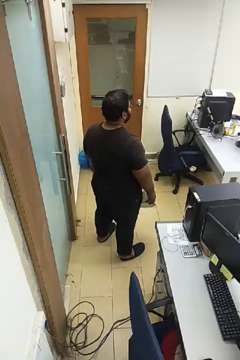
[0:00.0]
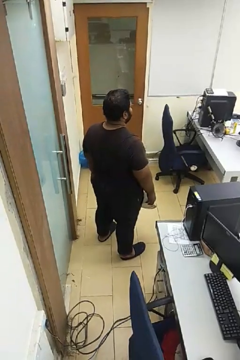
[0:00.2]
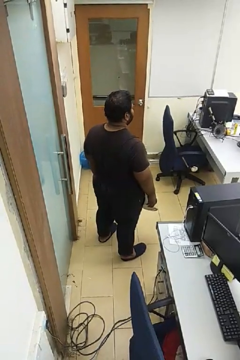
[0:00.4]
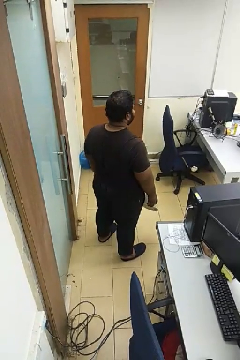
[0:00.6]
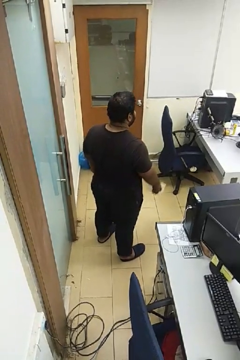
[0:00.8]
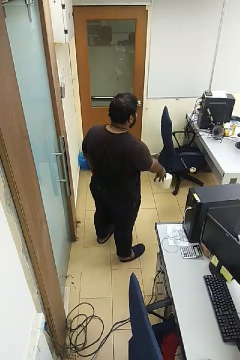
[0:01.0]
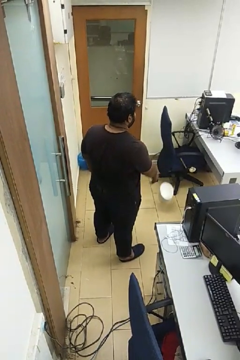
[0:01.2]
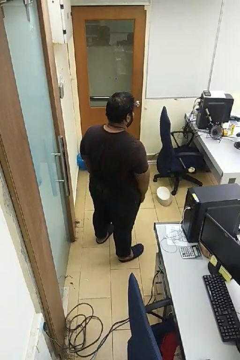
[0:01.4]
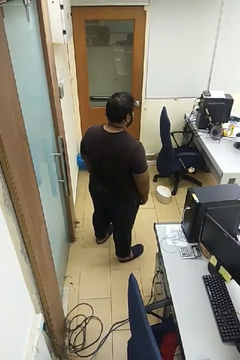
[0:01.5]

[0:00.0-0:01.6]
person throws object to ground

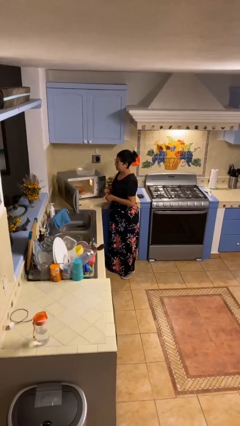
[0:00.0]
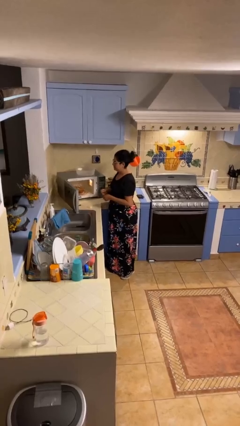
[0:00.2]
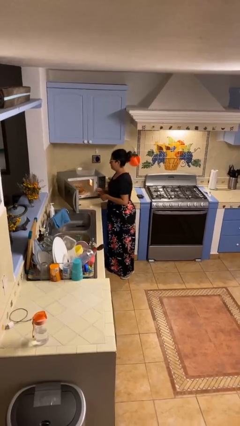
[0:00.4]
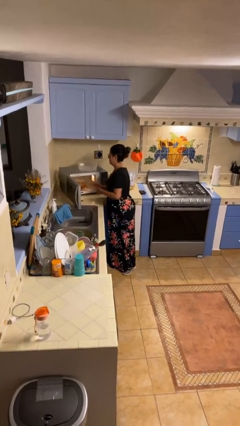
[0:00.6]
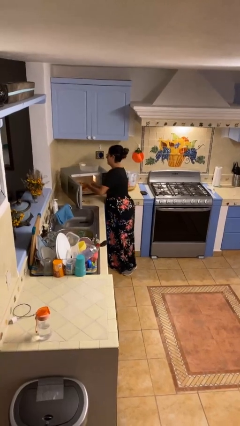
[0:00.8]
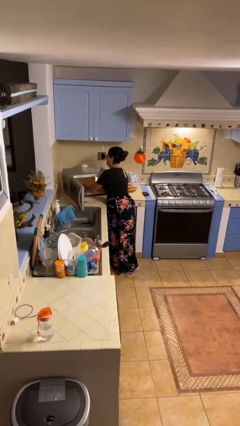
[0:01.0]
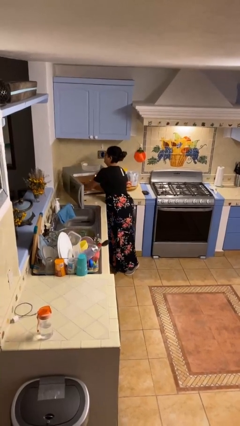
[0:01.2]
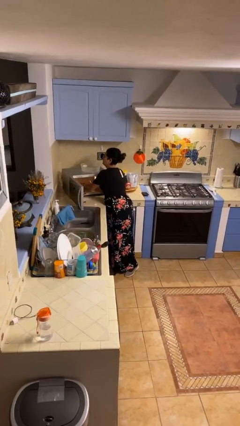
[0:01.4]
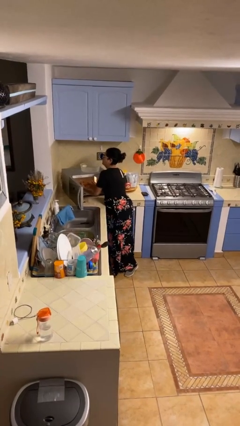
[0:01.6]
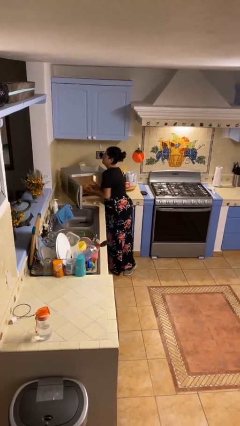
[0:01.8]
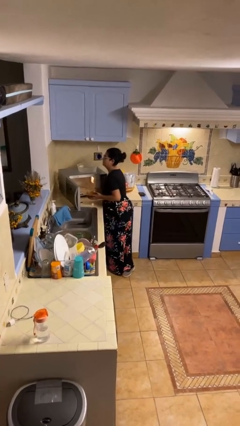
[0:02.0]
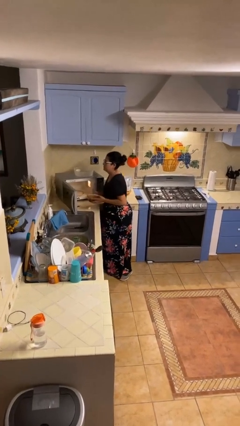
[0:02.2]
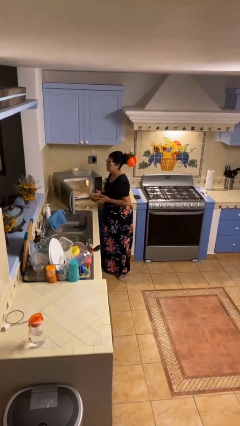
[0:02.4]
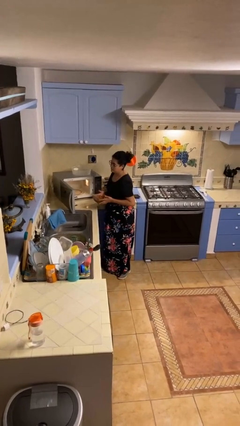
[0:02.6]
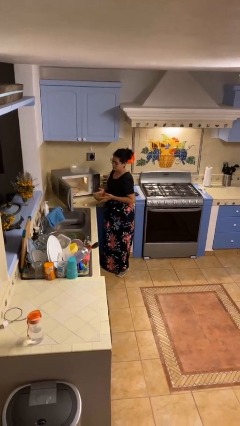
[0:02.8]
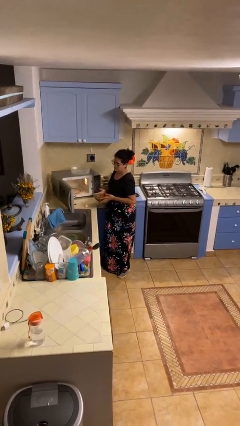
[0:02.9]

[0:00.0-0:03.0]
person takes object from microwave

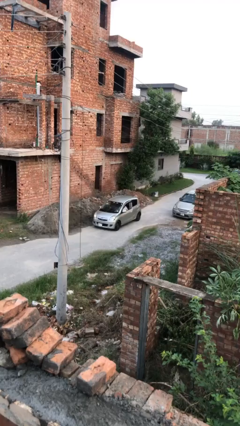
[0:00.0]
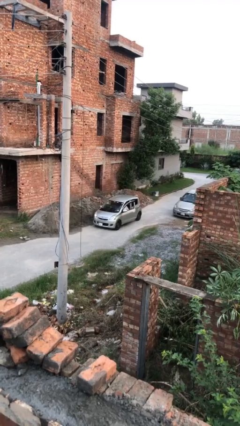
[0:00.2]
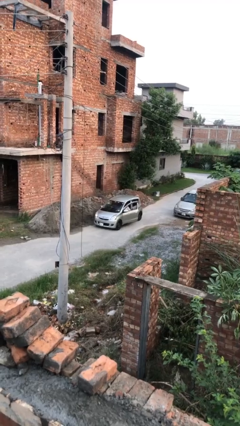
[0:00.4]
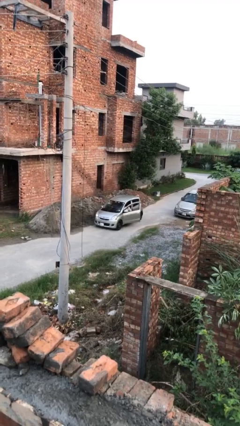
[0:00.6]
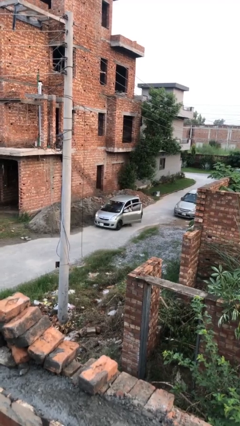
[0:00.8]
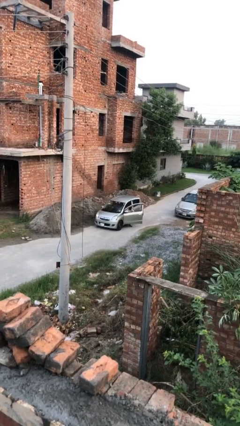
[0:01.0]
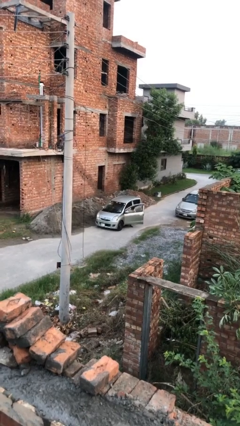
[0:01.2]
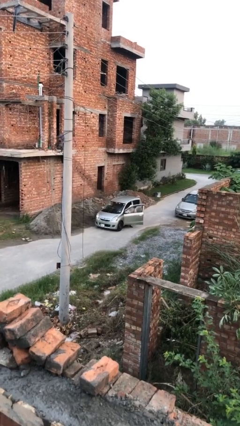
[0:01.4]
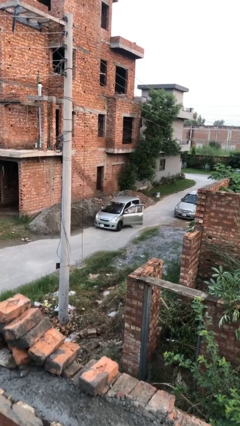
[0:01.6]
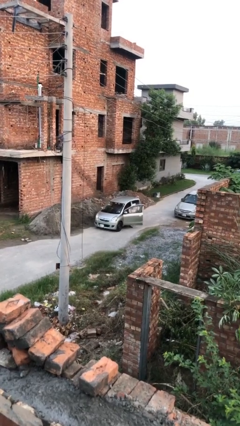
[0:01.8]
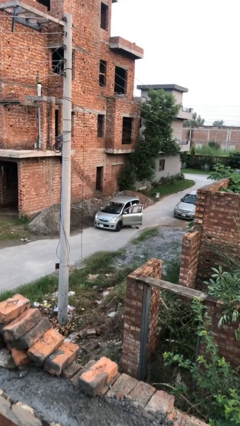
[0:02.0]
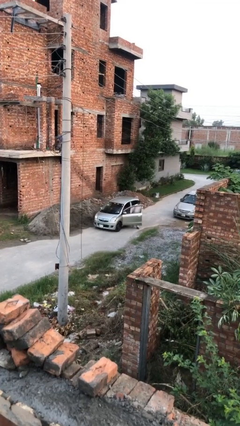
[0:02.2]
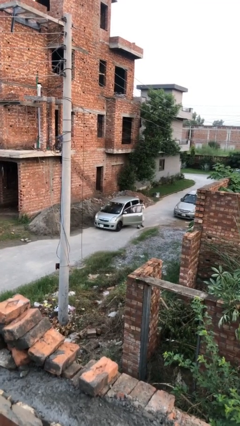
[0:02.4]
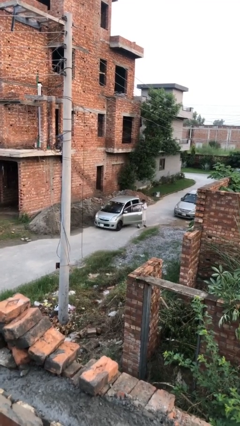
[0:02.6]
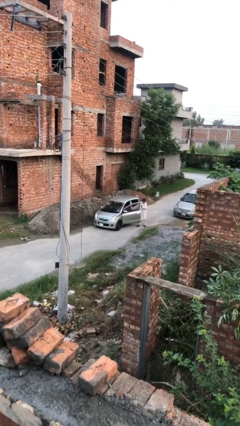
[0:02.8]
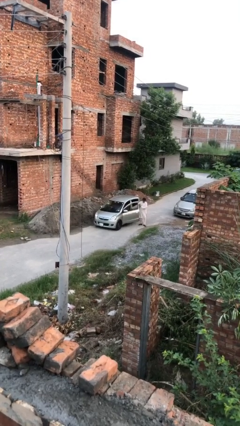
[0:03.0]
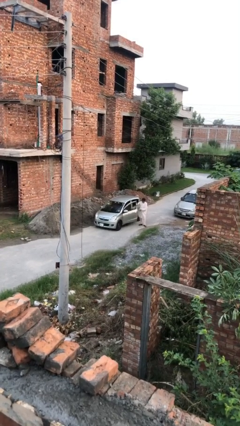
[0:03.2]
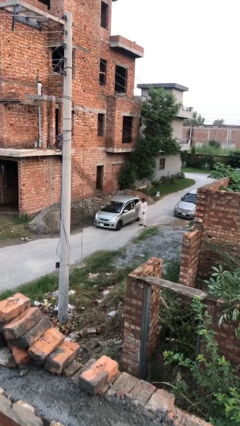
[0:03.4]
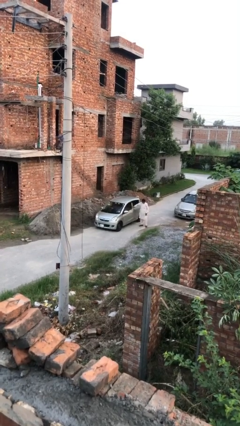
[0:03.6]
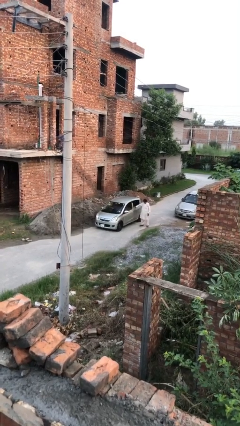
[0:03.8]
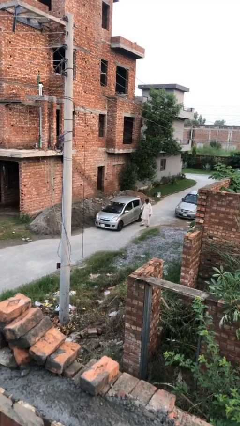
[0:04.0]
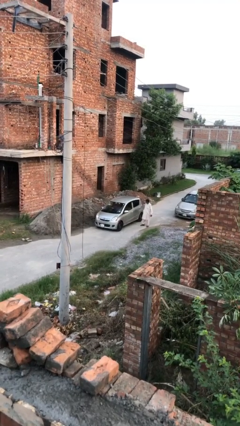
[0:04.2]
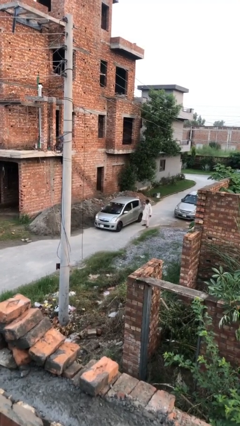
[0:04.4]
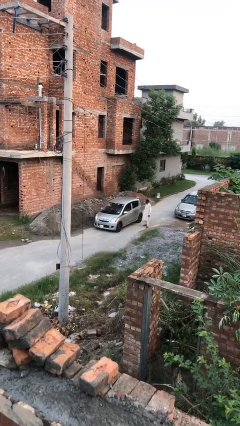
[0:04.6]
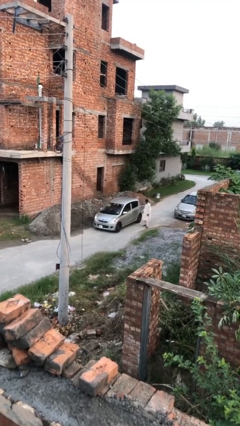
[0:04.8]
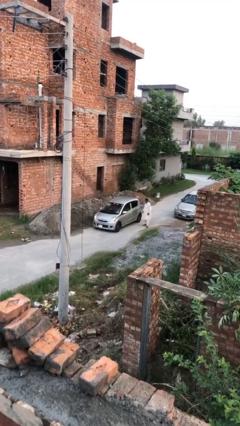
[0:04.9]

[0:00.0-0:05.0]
car drops off person

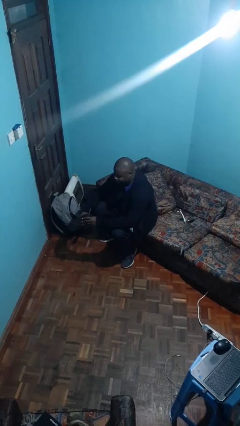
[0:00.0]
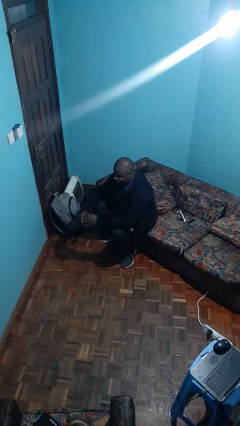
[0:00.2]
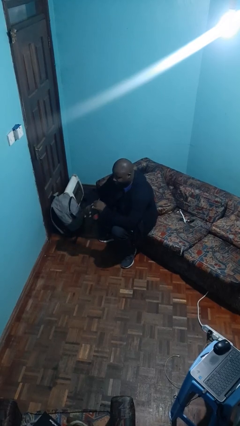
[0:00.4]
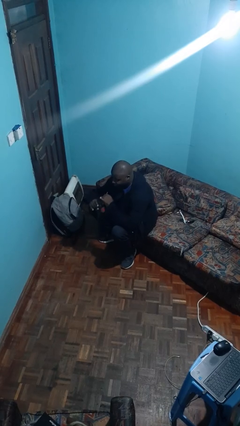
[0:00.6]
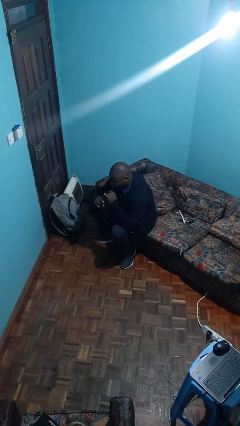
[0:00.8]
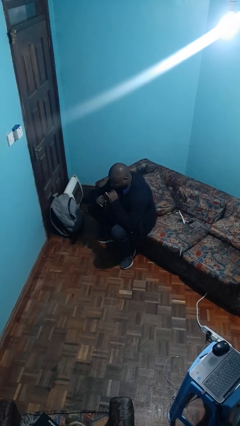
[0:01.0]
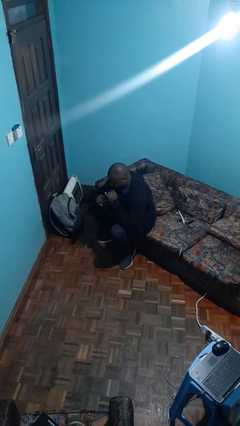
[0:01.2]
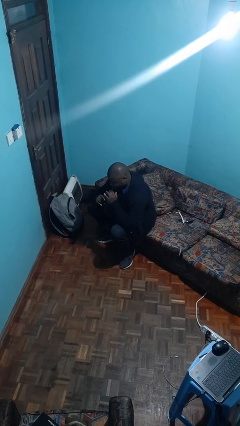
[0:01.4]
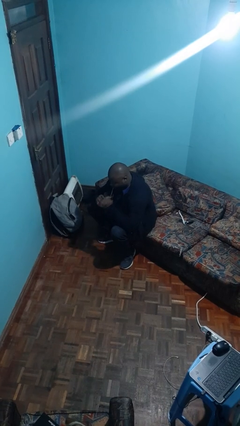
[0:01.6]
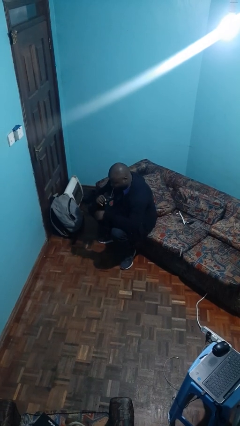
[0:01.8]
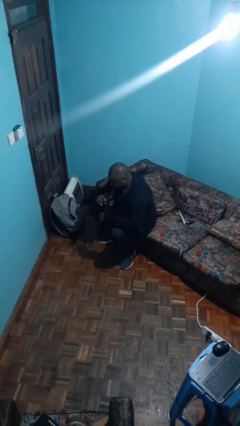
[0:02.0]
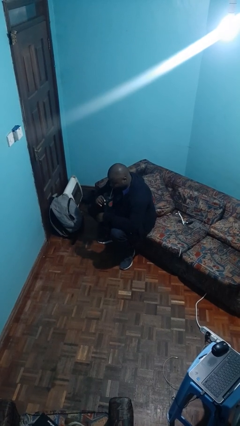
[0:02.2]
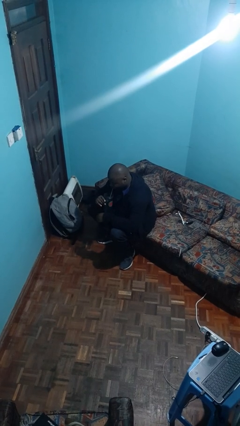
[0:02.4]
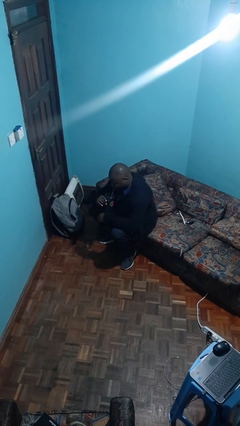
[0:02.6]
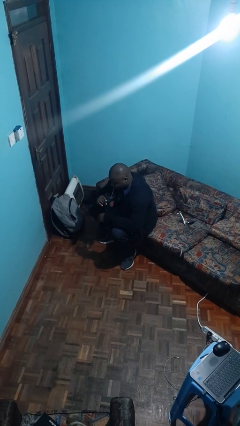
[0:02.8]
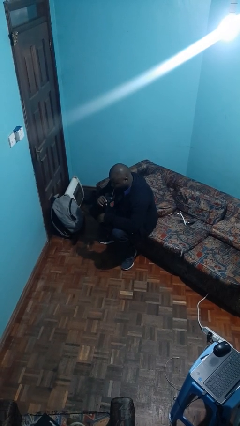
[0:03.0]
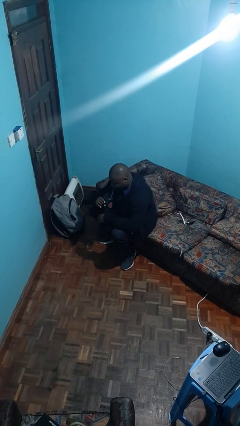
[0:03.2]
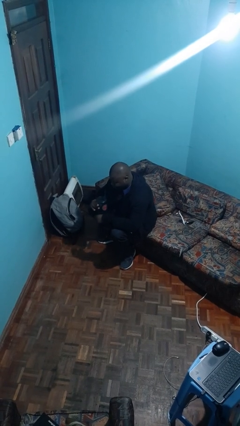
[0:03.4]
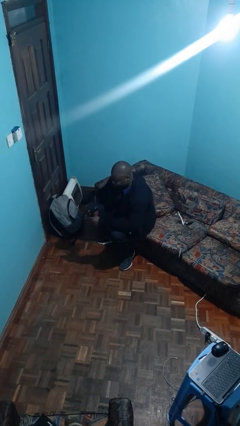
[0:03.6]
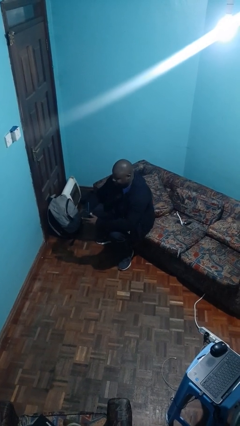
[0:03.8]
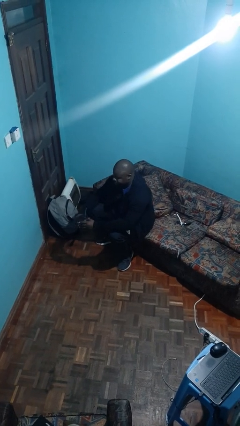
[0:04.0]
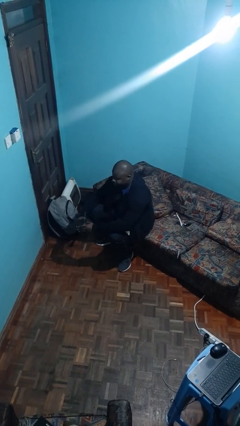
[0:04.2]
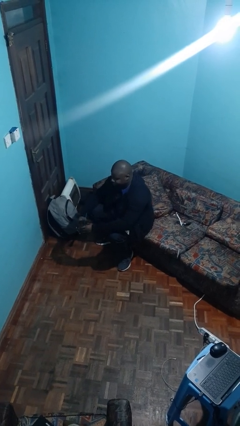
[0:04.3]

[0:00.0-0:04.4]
person drinks from straw

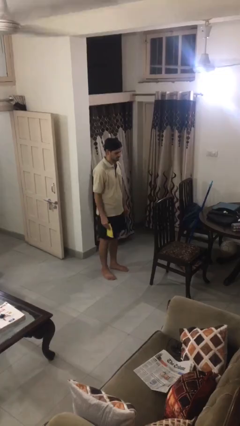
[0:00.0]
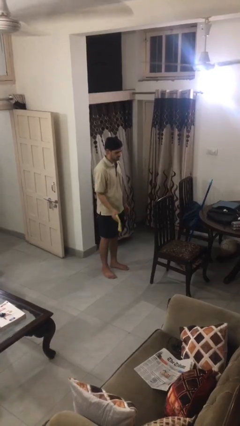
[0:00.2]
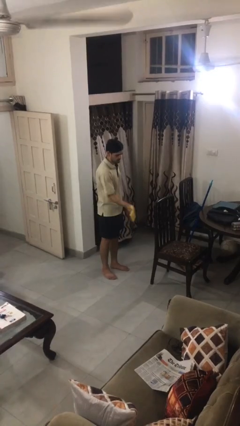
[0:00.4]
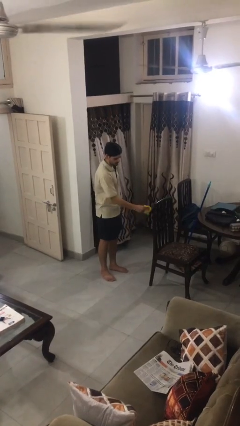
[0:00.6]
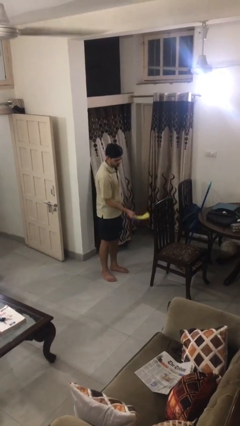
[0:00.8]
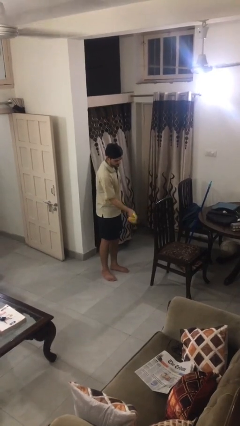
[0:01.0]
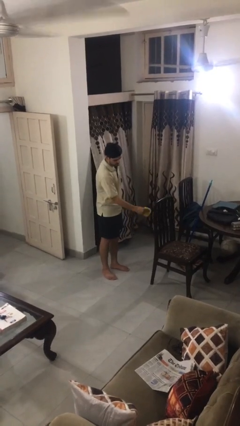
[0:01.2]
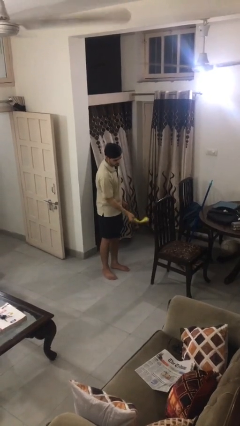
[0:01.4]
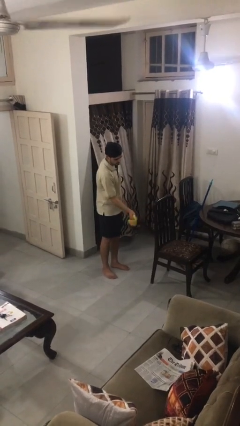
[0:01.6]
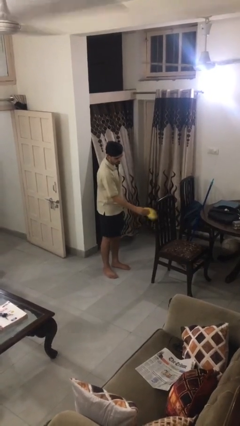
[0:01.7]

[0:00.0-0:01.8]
person dusts furniture

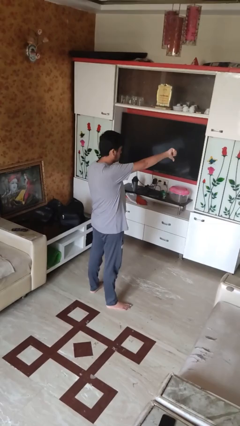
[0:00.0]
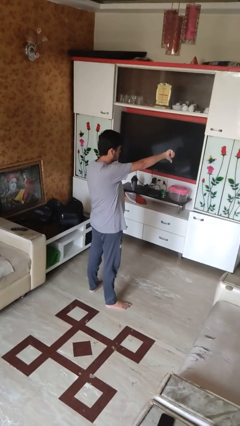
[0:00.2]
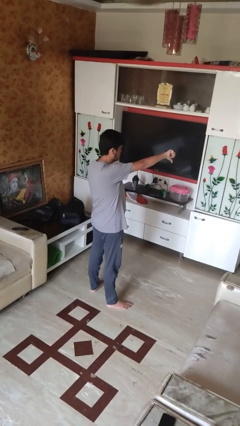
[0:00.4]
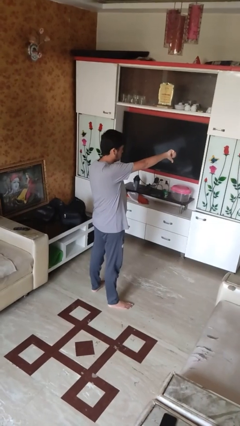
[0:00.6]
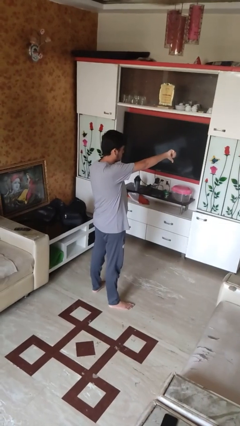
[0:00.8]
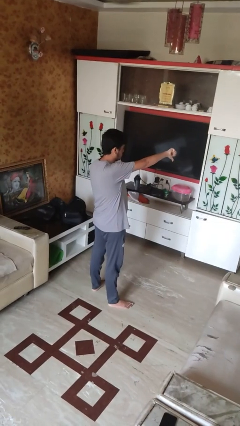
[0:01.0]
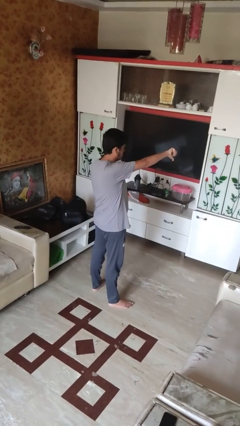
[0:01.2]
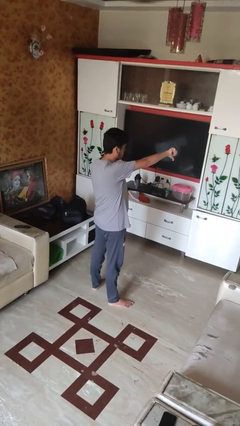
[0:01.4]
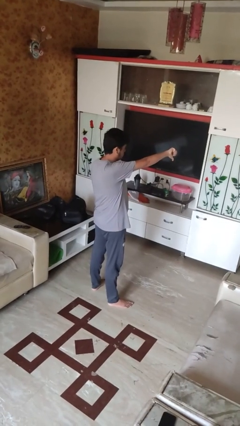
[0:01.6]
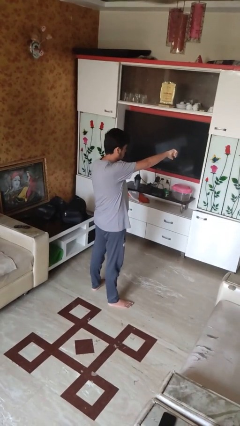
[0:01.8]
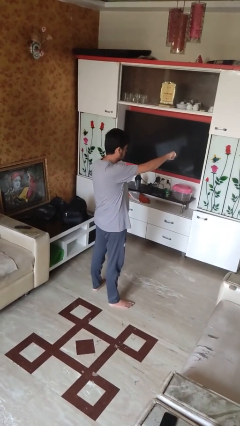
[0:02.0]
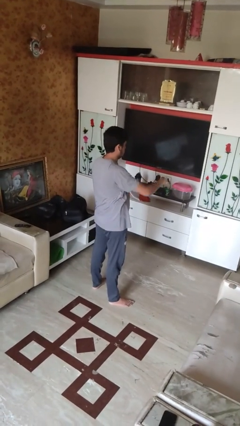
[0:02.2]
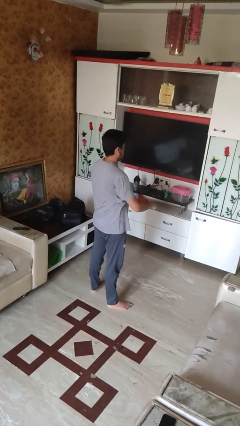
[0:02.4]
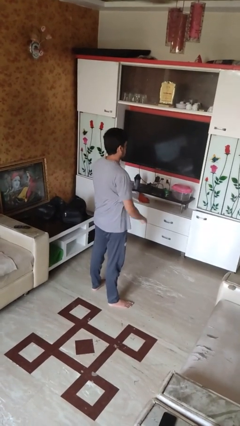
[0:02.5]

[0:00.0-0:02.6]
person gestures thumbs down
